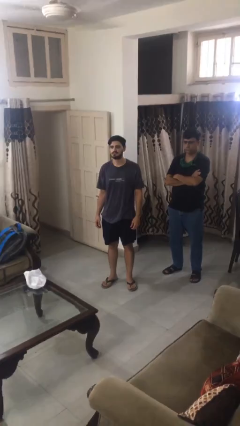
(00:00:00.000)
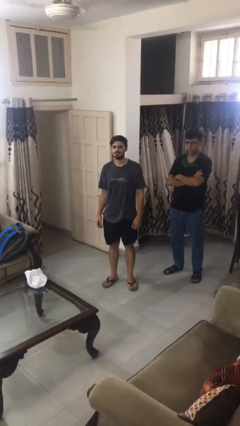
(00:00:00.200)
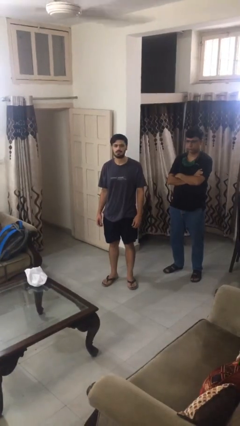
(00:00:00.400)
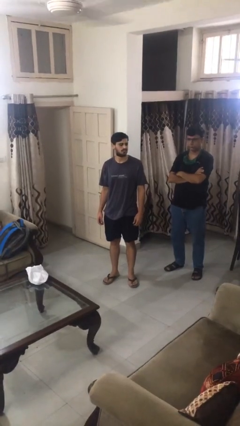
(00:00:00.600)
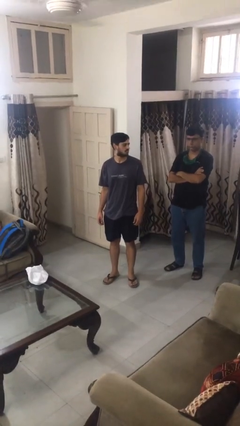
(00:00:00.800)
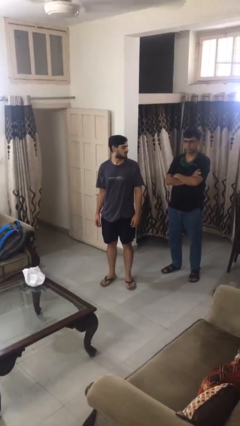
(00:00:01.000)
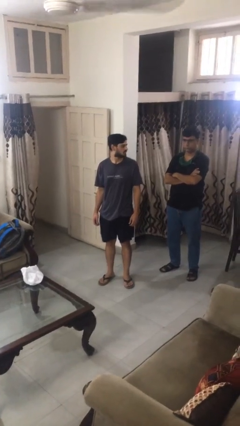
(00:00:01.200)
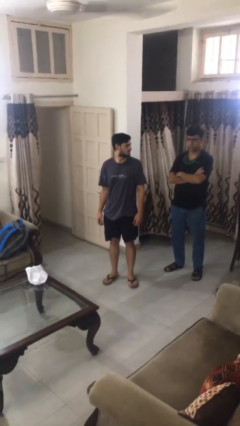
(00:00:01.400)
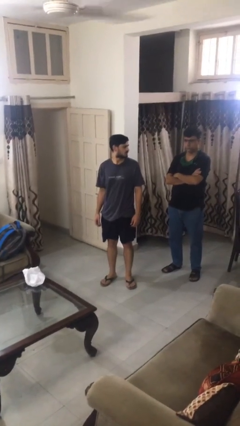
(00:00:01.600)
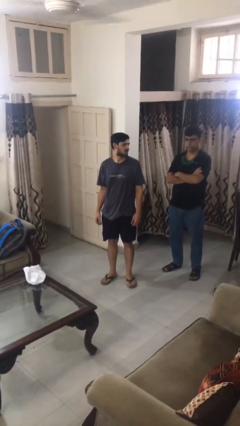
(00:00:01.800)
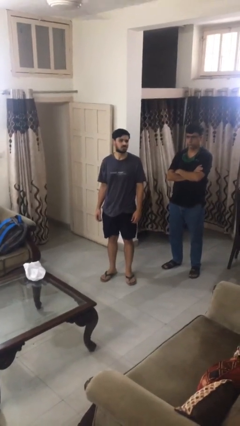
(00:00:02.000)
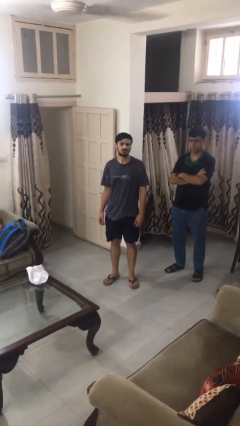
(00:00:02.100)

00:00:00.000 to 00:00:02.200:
person looks over shoulder

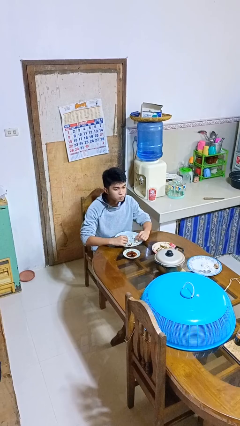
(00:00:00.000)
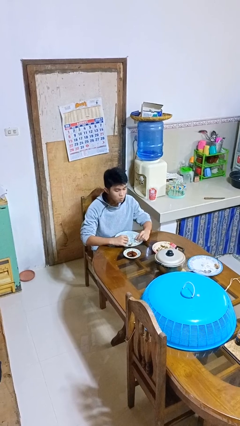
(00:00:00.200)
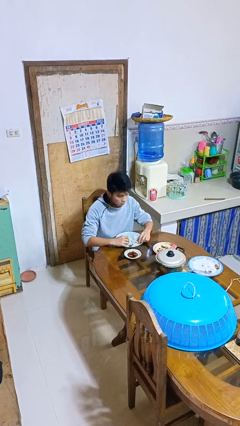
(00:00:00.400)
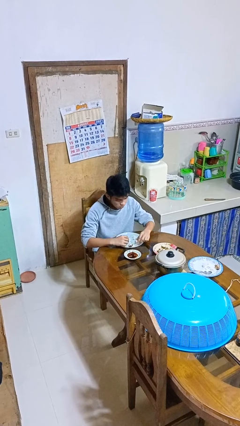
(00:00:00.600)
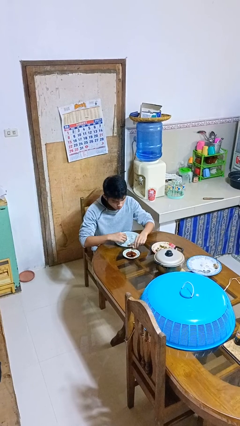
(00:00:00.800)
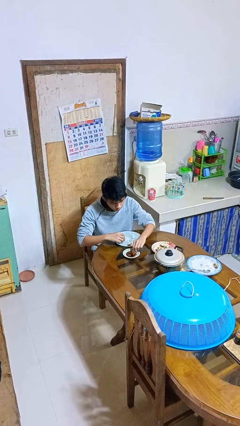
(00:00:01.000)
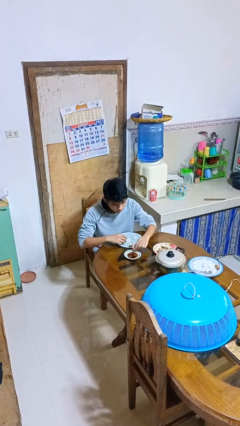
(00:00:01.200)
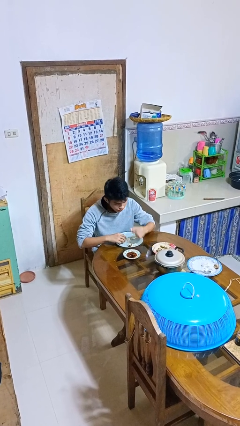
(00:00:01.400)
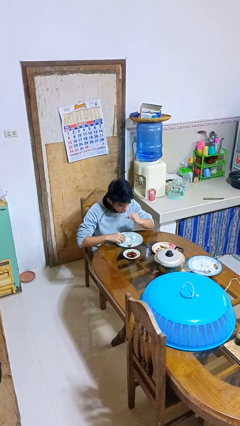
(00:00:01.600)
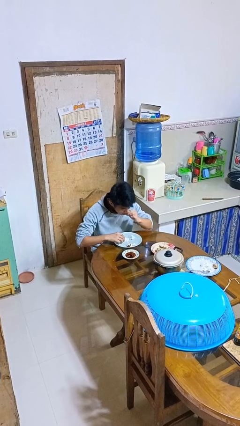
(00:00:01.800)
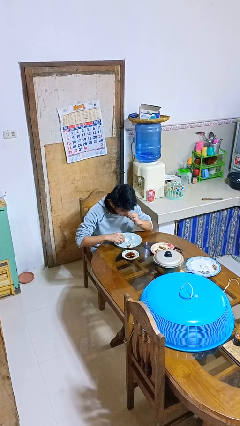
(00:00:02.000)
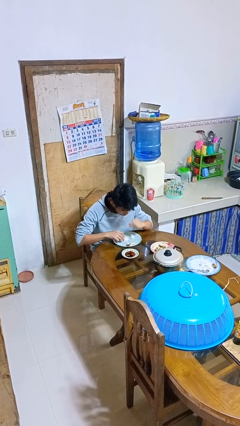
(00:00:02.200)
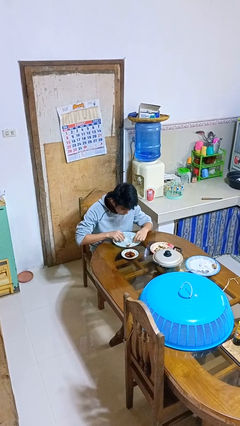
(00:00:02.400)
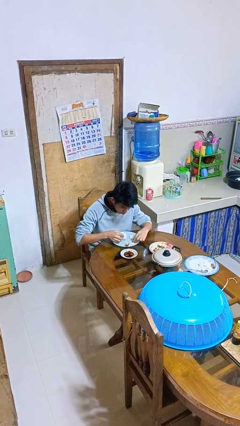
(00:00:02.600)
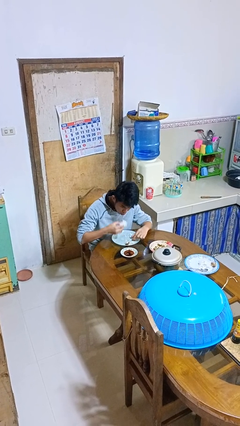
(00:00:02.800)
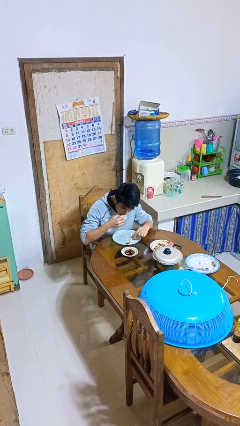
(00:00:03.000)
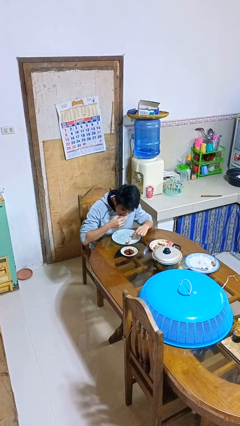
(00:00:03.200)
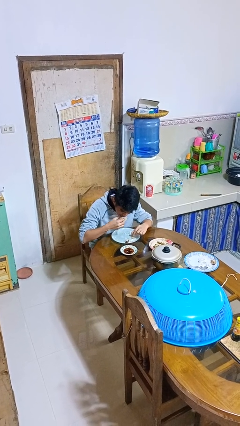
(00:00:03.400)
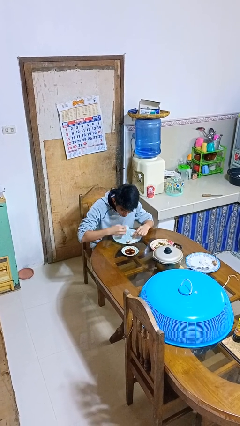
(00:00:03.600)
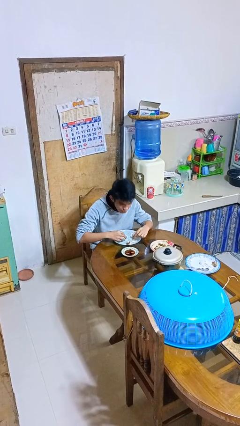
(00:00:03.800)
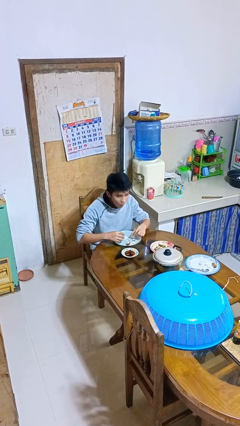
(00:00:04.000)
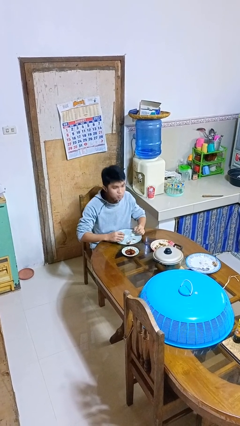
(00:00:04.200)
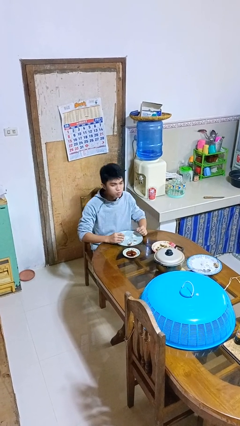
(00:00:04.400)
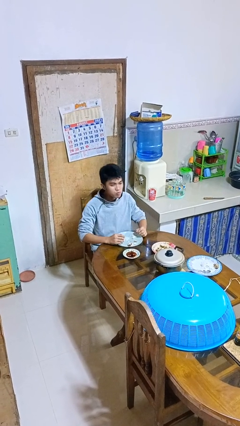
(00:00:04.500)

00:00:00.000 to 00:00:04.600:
person eats with hands

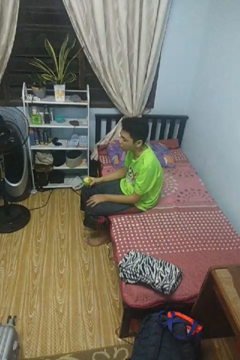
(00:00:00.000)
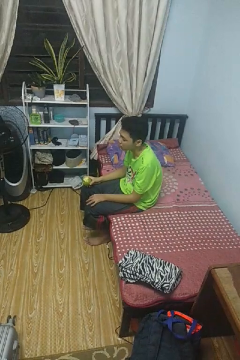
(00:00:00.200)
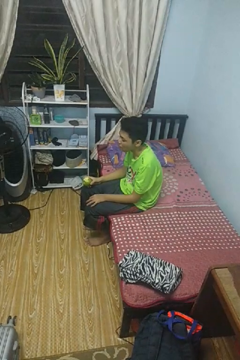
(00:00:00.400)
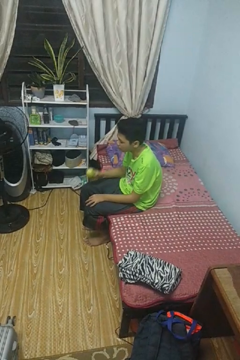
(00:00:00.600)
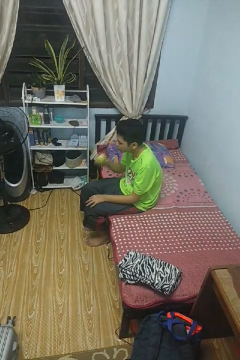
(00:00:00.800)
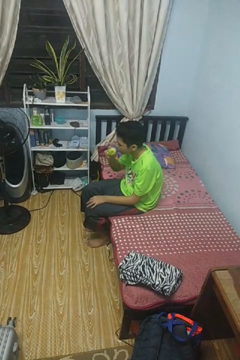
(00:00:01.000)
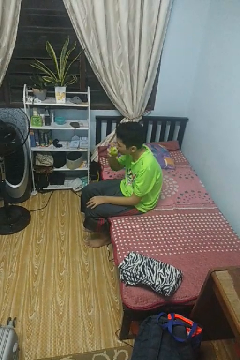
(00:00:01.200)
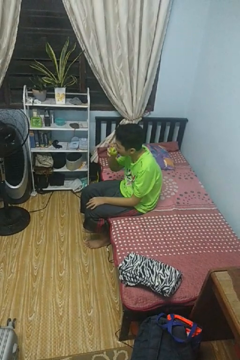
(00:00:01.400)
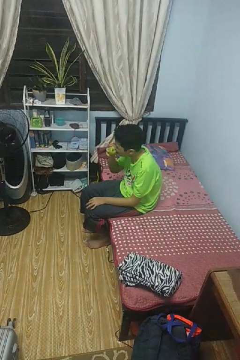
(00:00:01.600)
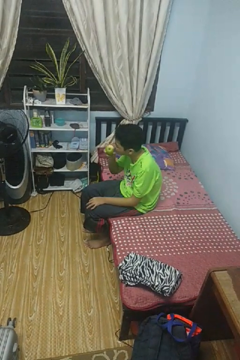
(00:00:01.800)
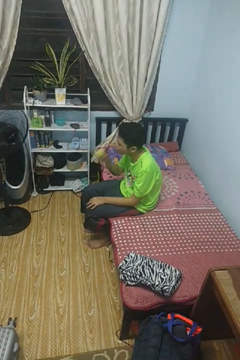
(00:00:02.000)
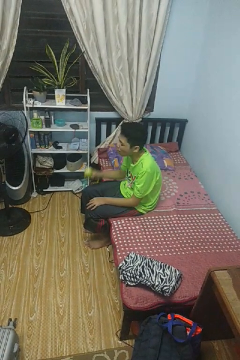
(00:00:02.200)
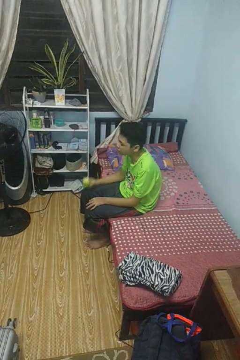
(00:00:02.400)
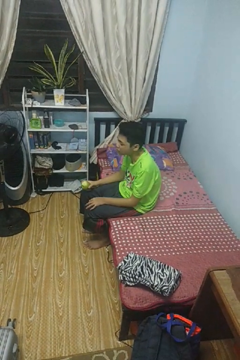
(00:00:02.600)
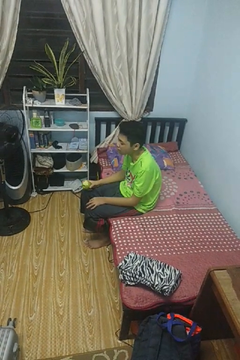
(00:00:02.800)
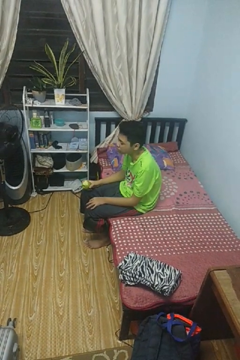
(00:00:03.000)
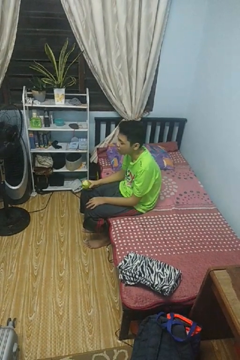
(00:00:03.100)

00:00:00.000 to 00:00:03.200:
person eats apple

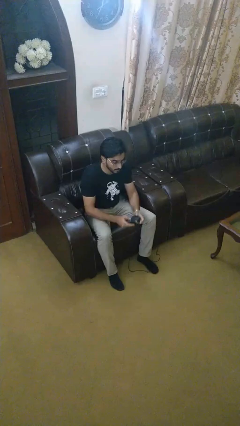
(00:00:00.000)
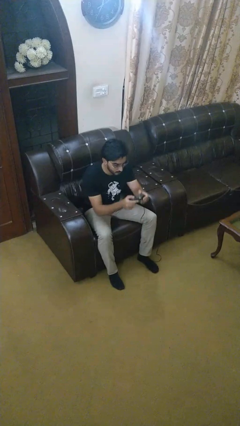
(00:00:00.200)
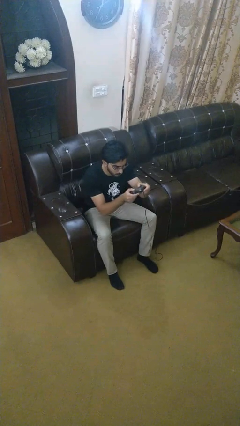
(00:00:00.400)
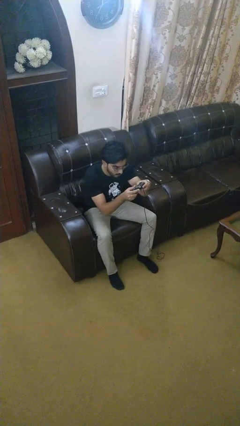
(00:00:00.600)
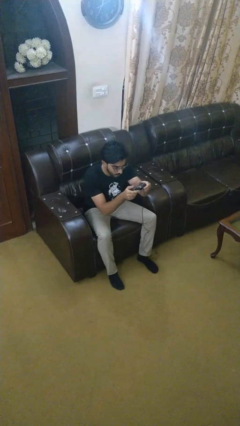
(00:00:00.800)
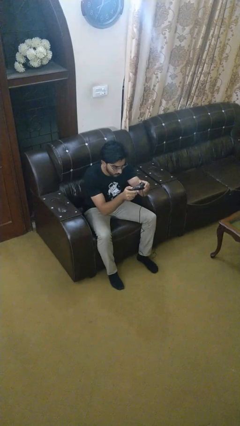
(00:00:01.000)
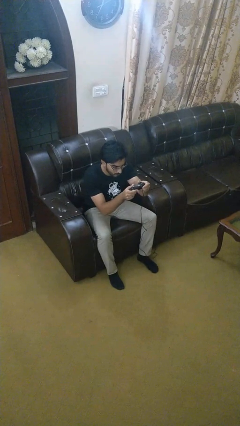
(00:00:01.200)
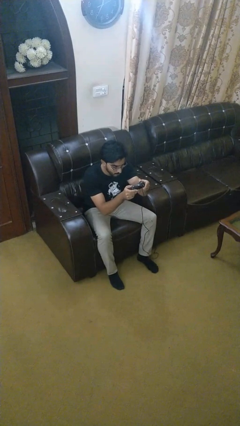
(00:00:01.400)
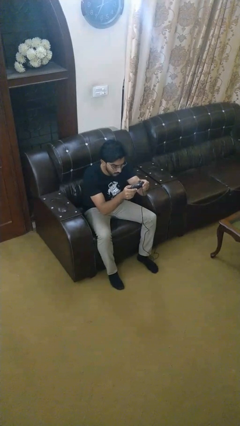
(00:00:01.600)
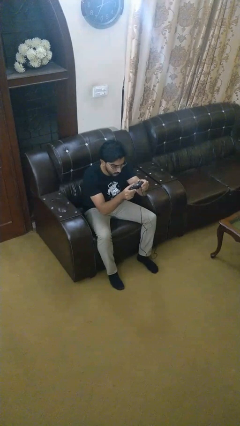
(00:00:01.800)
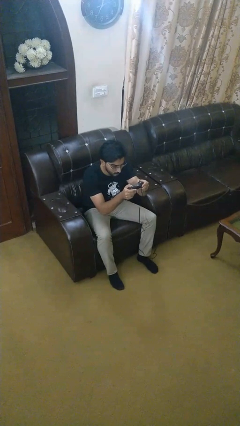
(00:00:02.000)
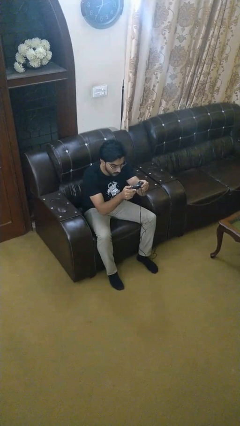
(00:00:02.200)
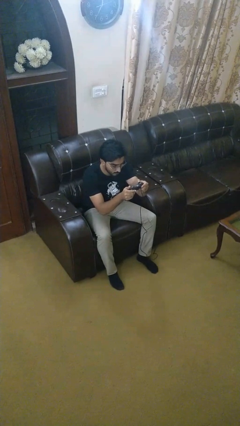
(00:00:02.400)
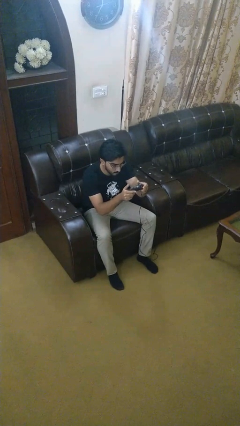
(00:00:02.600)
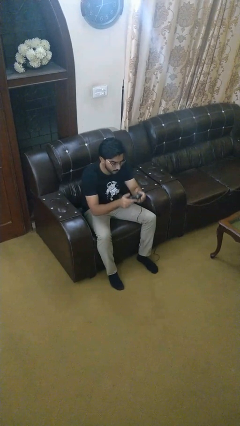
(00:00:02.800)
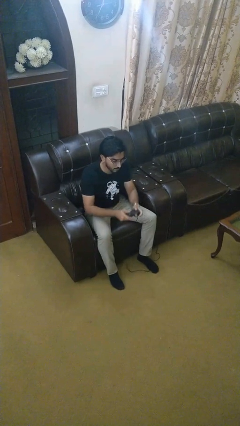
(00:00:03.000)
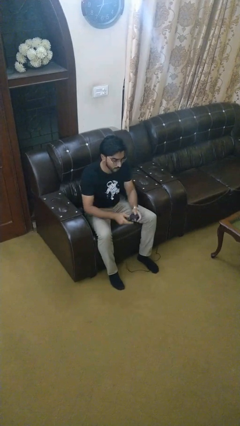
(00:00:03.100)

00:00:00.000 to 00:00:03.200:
person interacts with handheld game

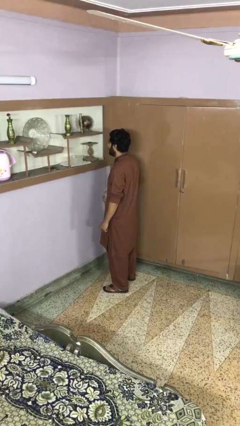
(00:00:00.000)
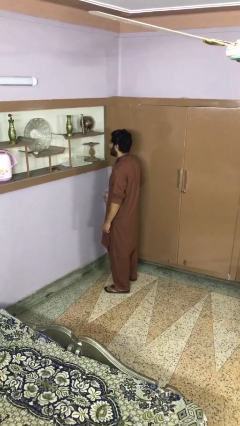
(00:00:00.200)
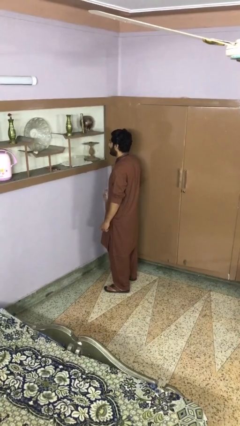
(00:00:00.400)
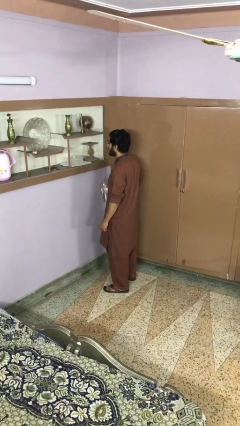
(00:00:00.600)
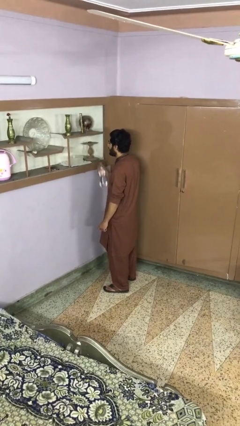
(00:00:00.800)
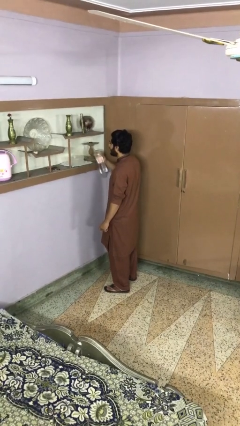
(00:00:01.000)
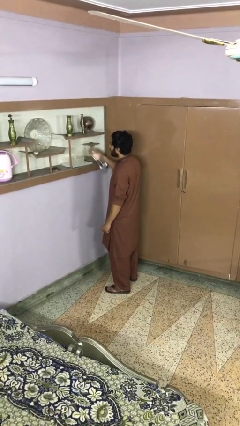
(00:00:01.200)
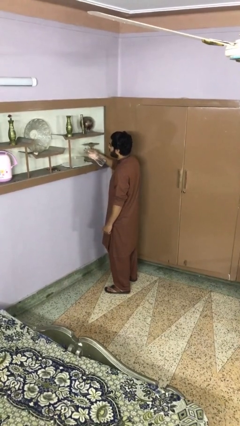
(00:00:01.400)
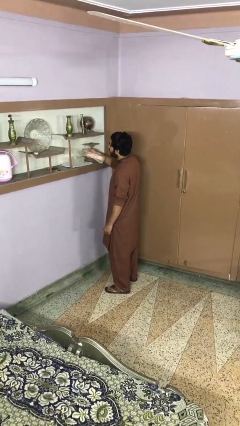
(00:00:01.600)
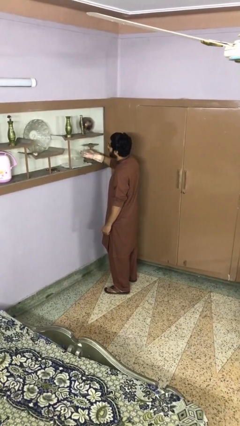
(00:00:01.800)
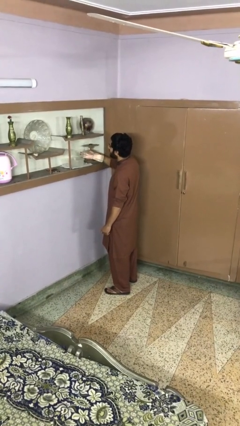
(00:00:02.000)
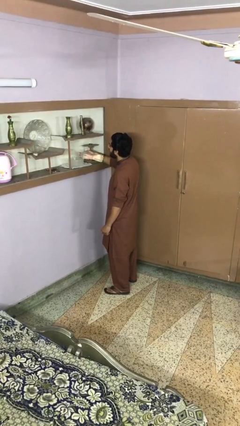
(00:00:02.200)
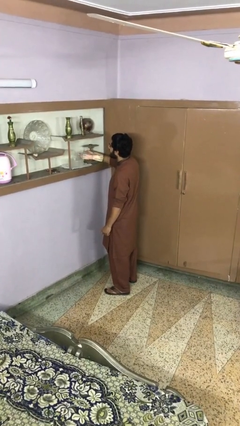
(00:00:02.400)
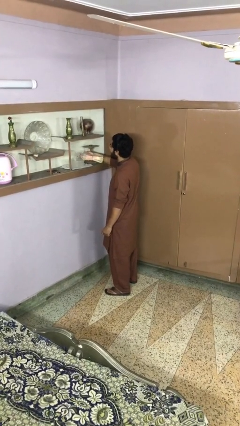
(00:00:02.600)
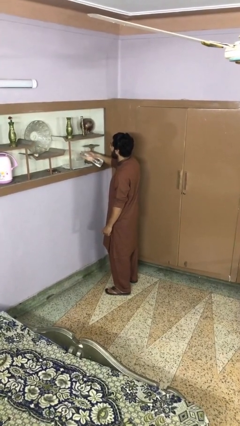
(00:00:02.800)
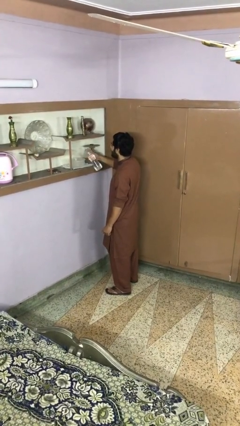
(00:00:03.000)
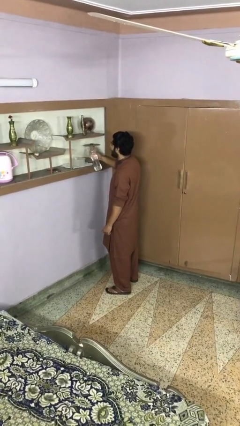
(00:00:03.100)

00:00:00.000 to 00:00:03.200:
person pours into bowl

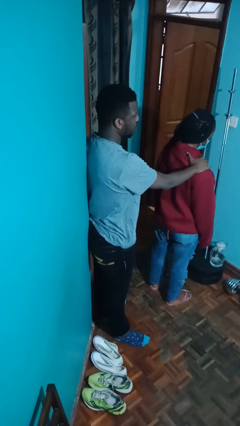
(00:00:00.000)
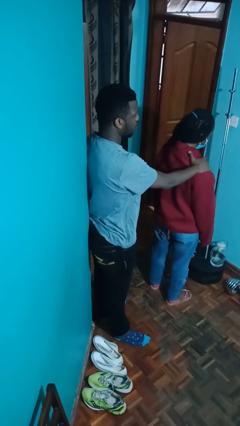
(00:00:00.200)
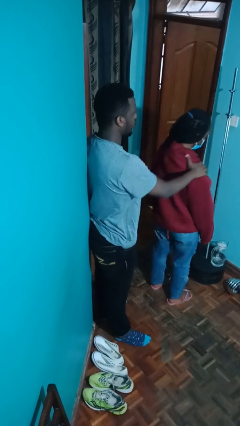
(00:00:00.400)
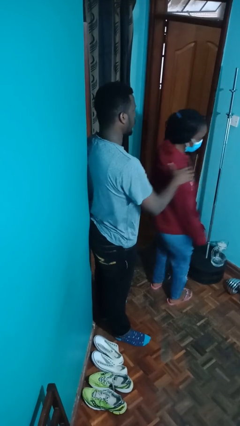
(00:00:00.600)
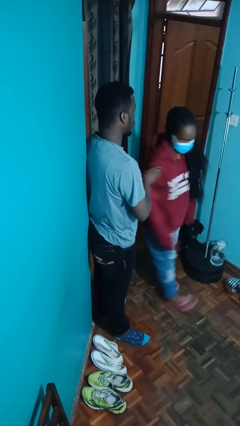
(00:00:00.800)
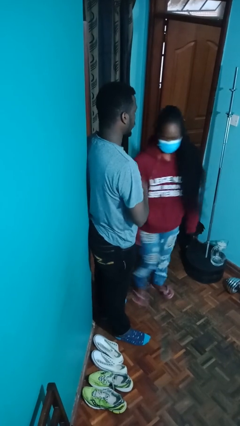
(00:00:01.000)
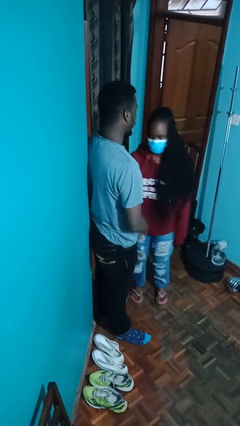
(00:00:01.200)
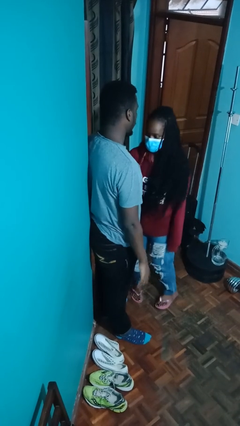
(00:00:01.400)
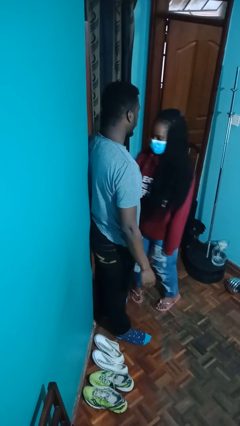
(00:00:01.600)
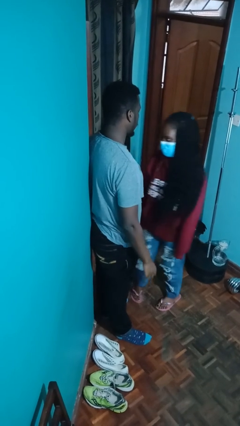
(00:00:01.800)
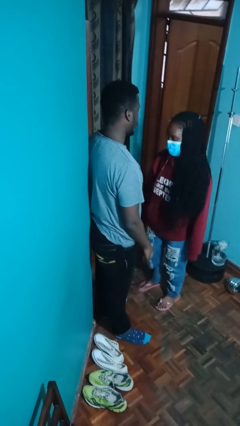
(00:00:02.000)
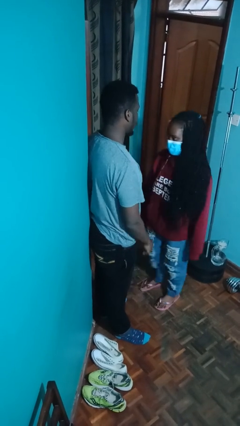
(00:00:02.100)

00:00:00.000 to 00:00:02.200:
person spins person around
